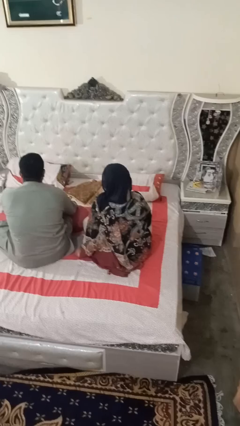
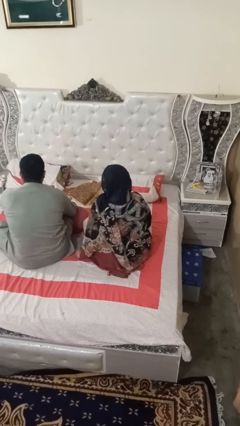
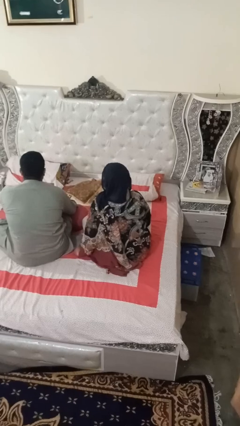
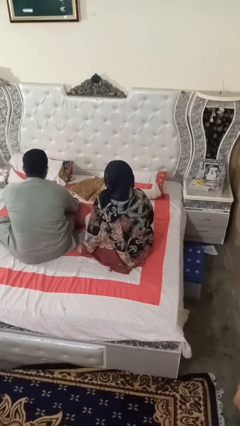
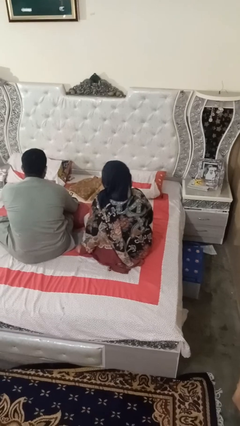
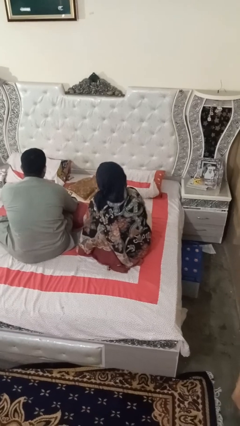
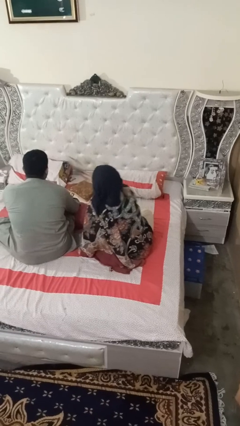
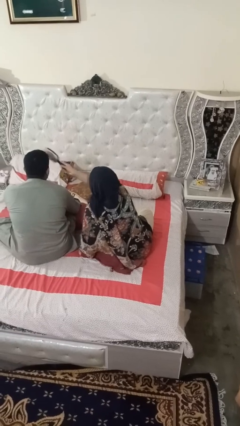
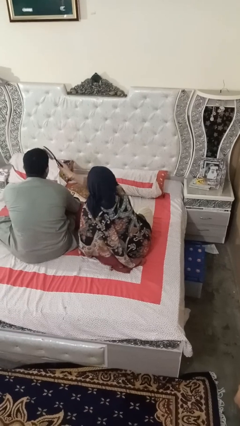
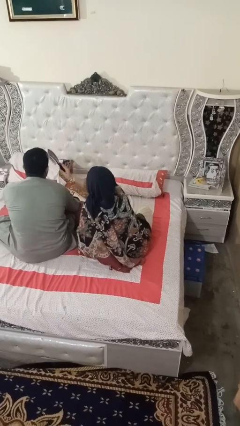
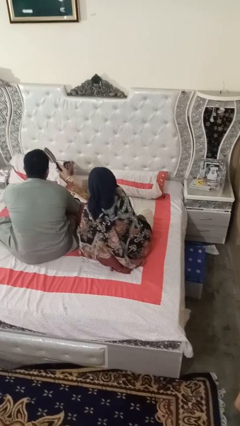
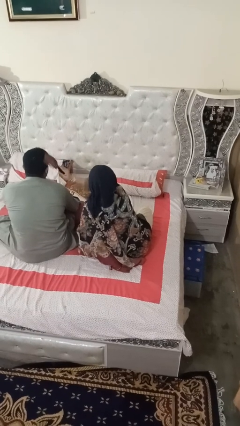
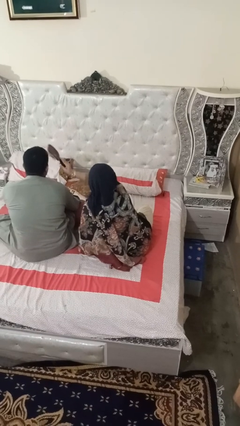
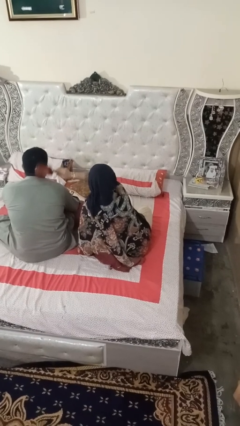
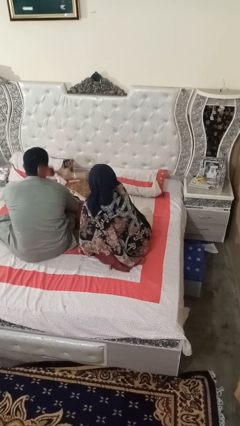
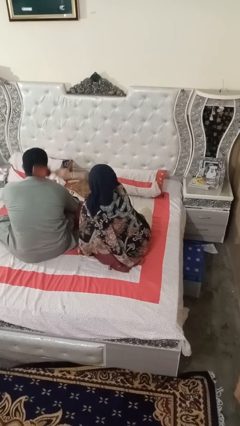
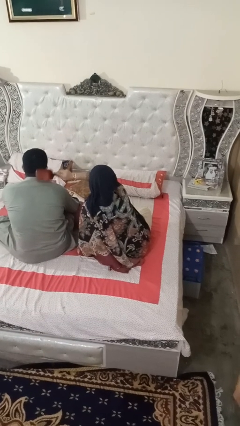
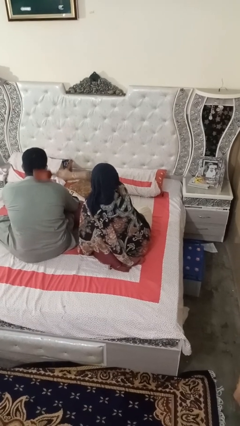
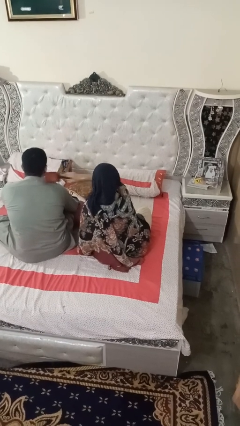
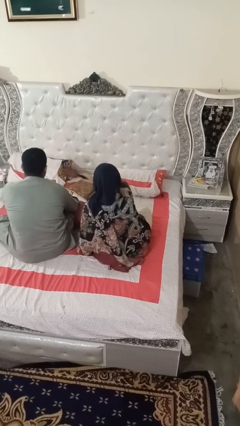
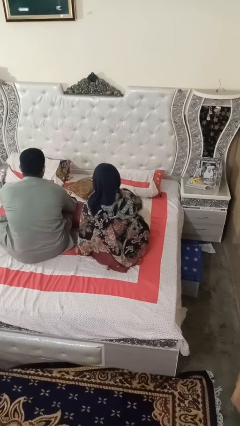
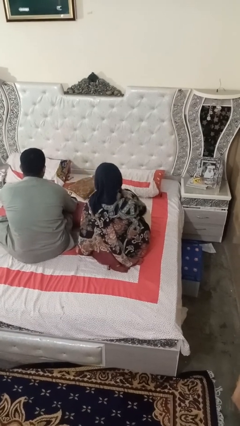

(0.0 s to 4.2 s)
person brushes hair of person

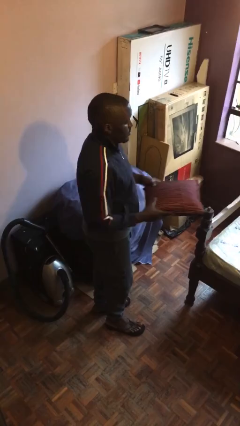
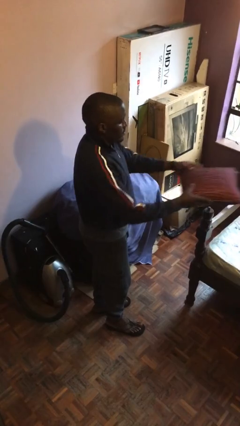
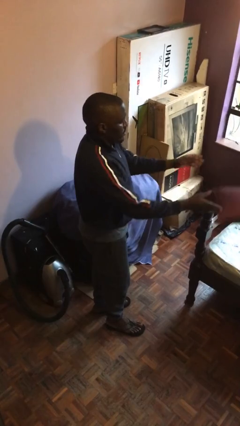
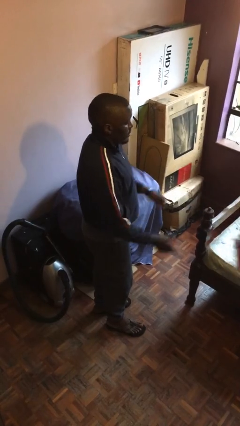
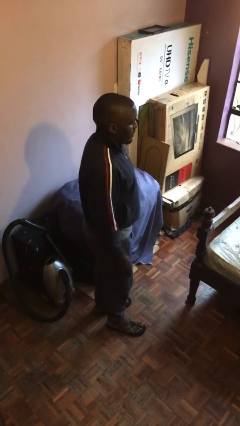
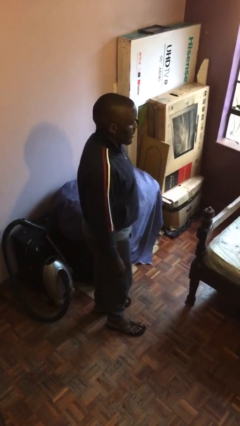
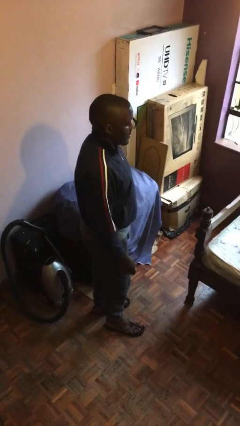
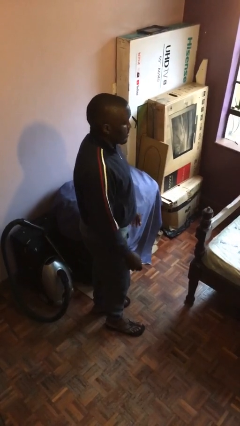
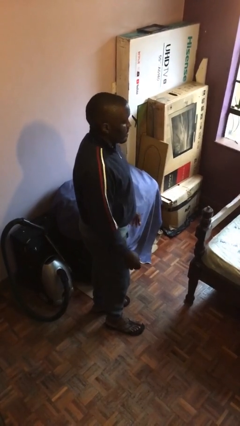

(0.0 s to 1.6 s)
person throws object on bed

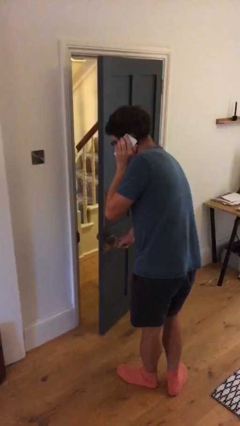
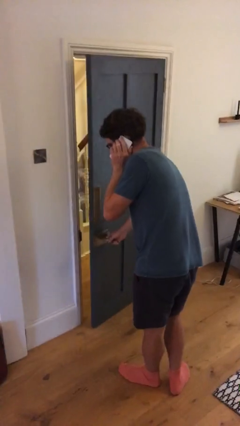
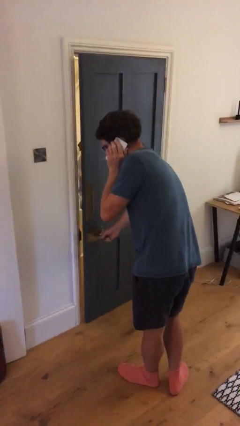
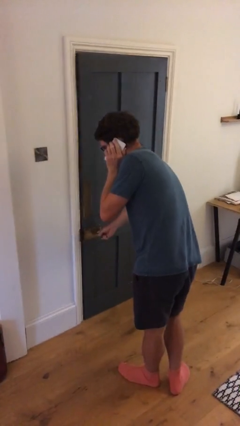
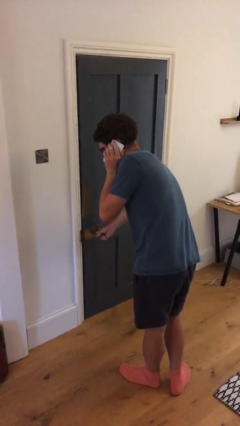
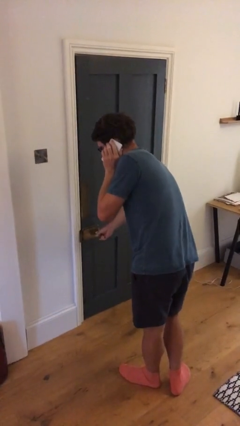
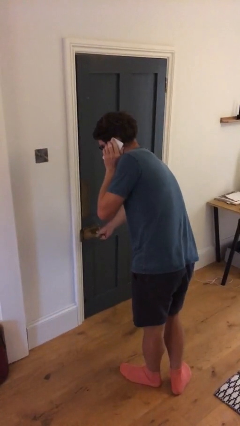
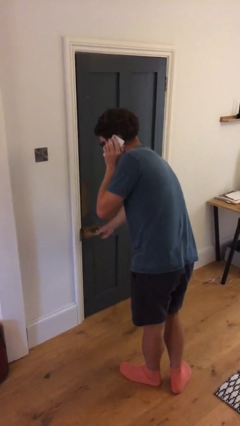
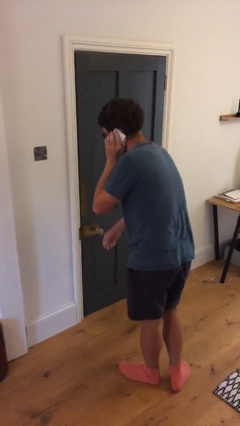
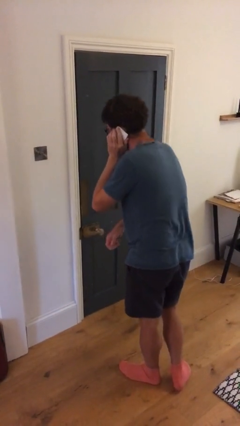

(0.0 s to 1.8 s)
person closes facility door

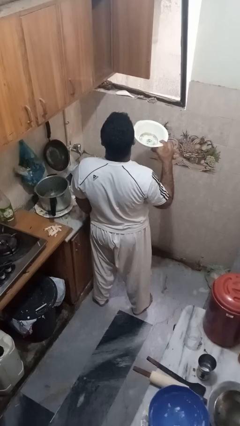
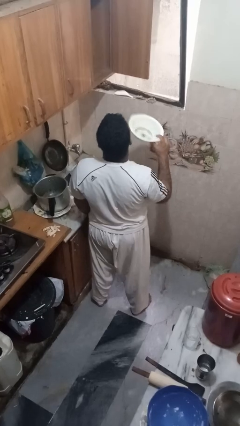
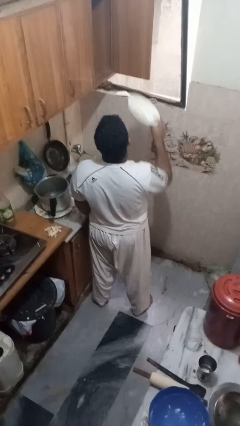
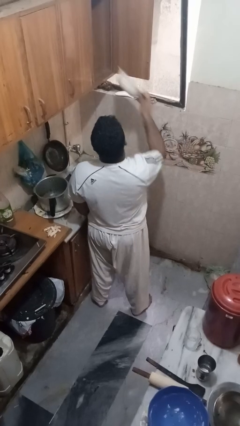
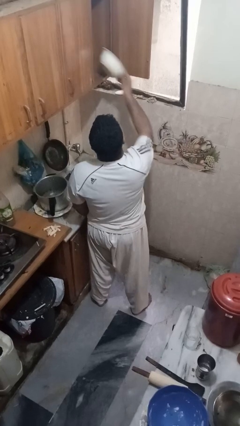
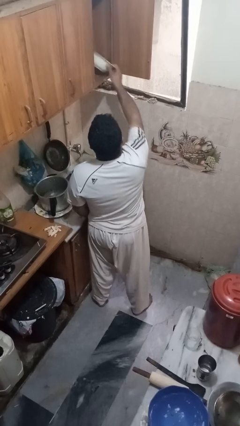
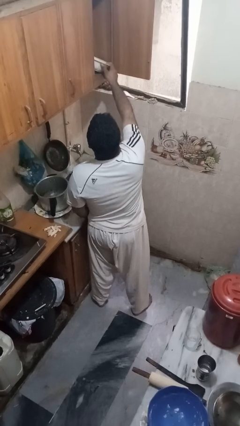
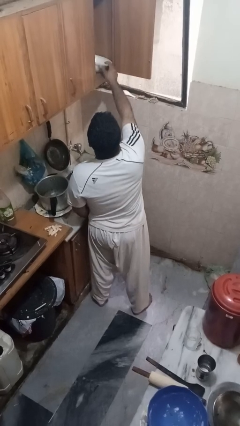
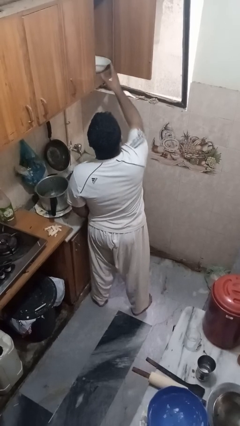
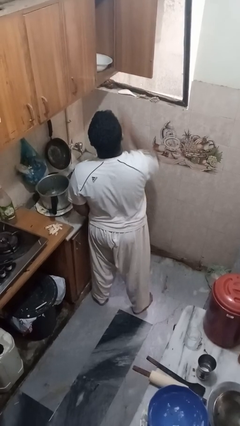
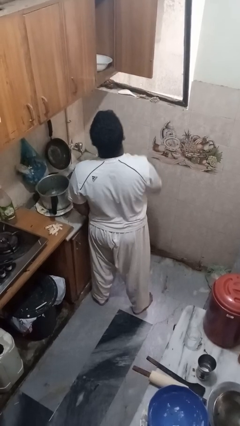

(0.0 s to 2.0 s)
person puts object in cabinet

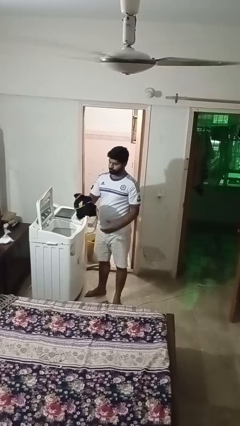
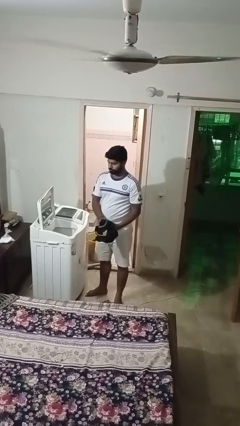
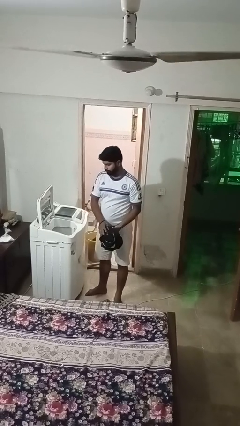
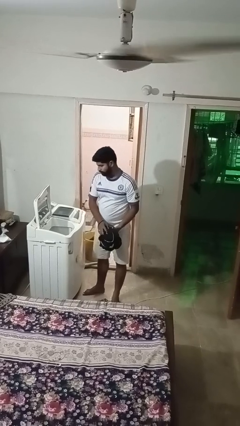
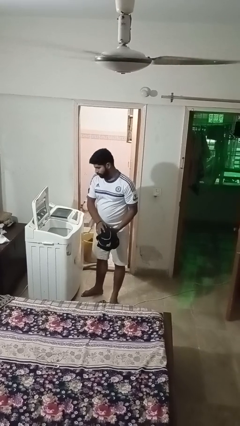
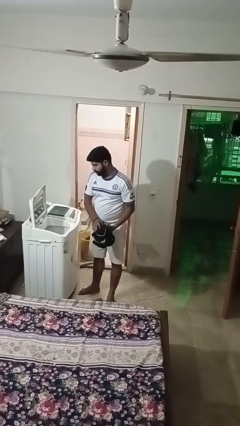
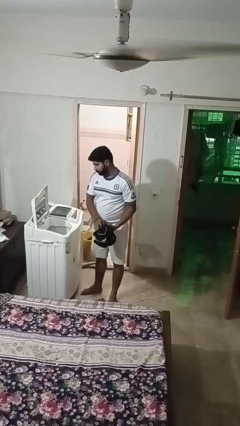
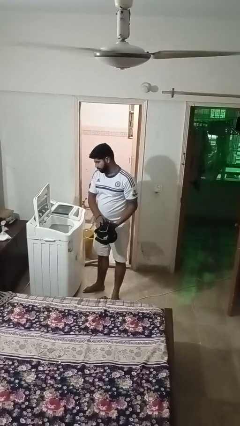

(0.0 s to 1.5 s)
person unloads clotheswasher

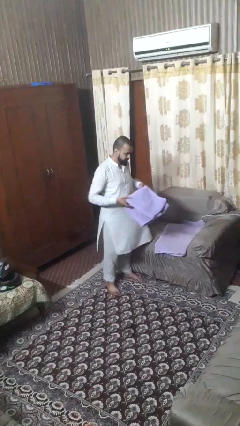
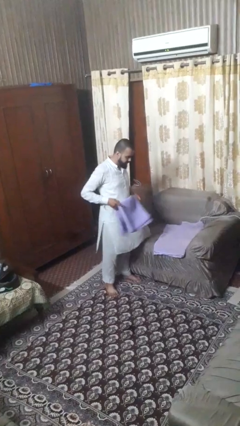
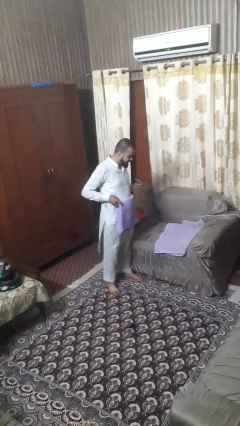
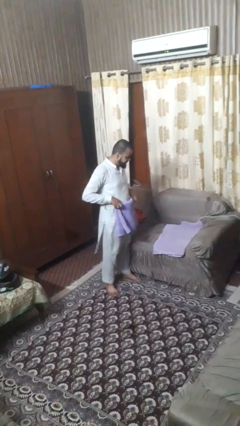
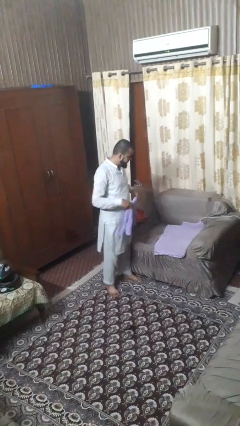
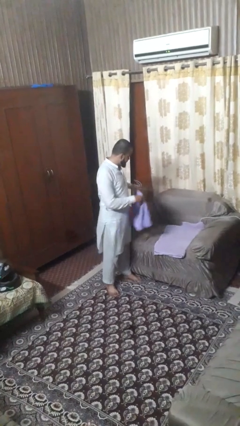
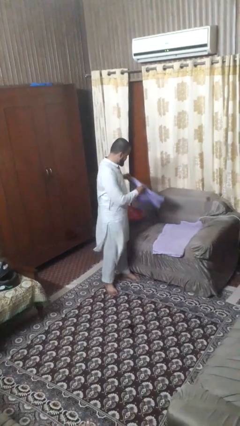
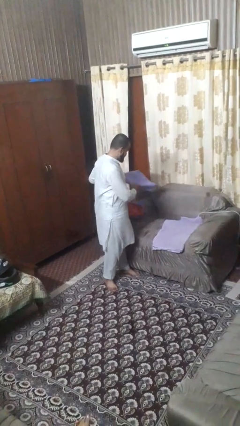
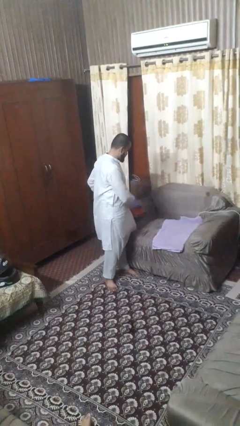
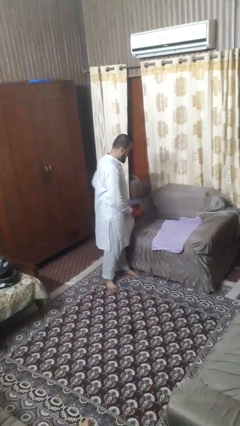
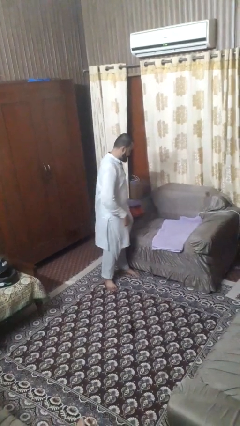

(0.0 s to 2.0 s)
person folds towel

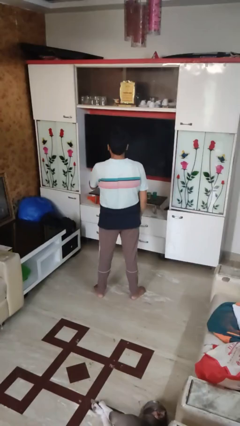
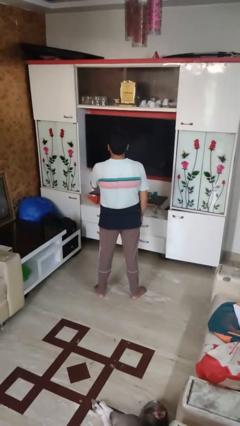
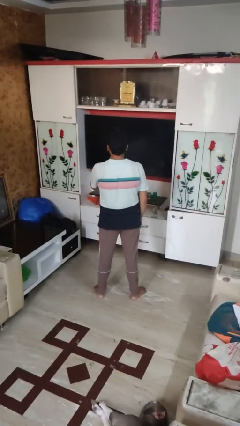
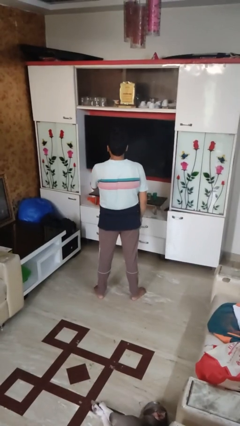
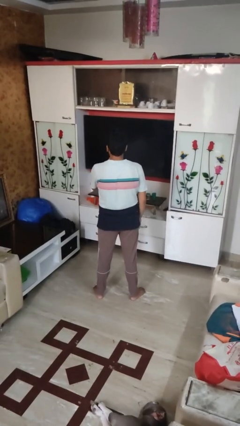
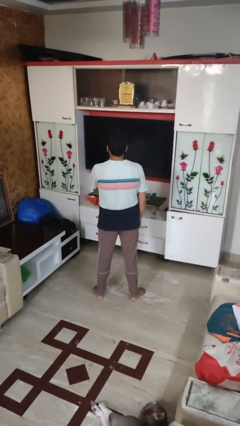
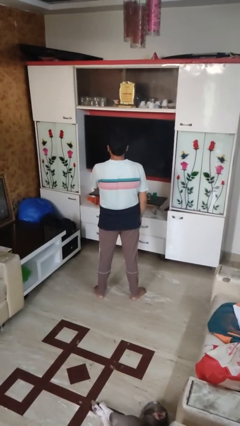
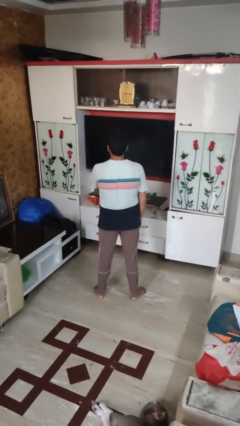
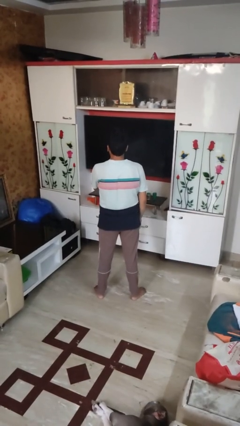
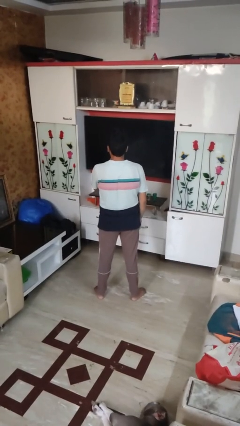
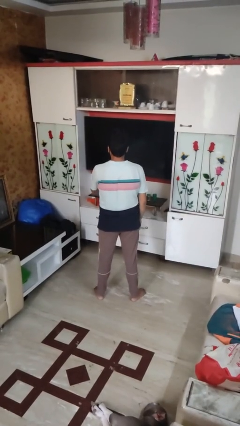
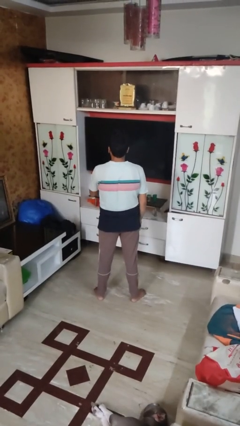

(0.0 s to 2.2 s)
person gestures be quiet

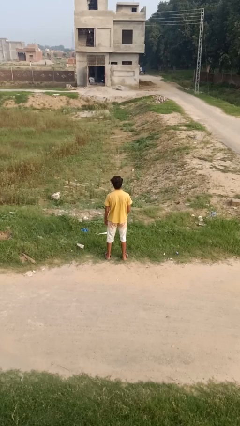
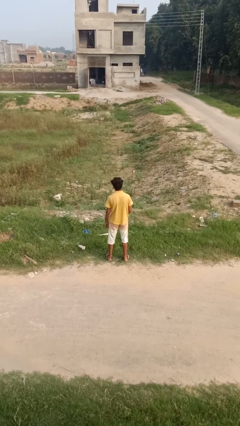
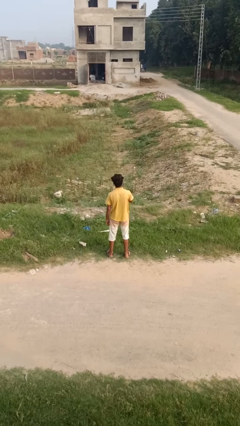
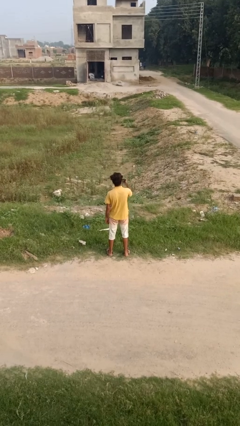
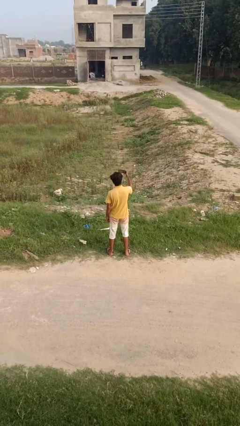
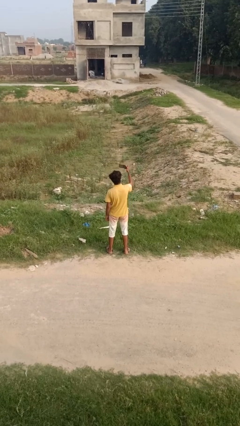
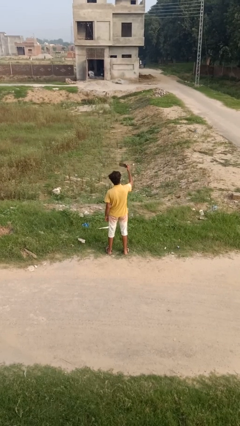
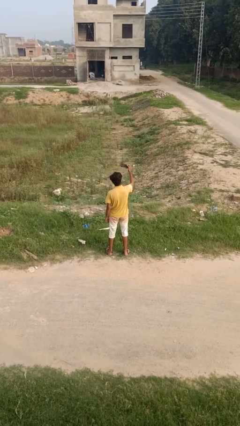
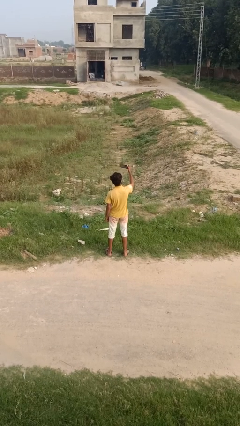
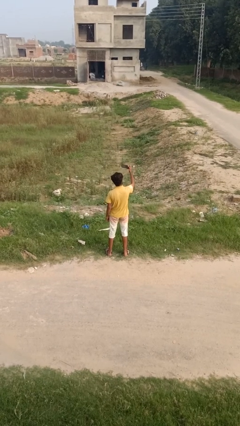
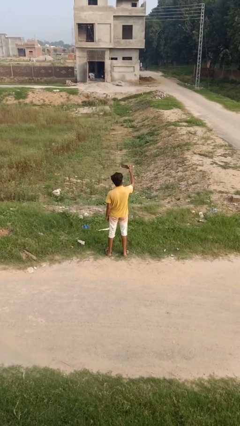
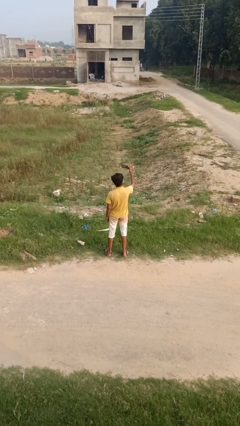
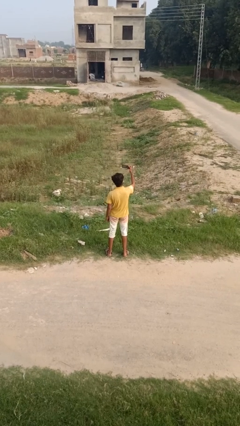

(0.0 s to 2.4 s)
person takes selfie
